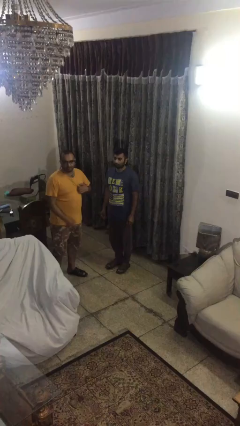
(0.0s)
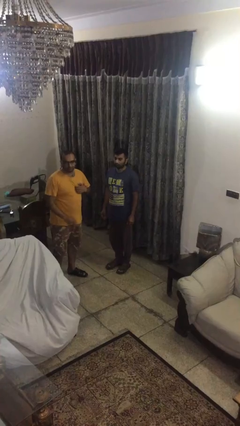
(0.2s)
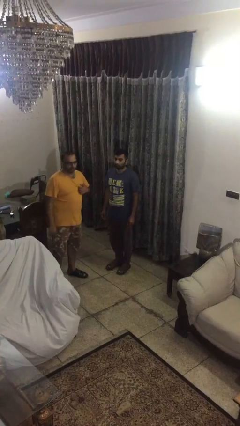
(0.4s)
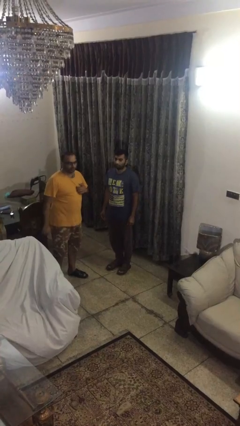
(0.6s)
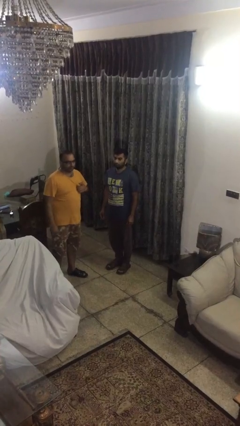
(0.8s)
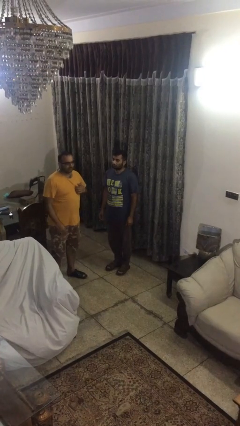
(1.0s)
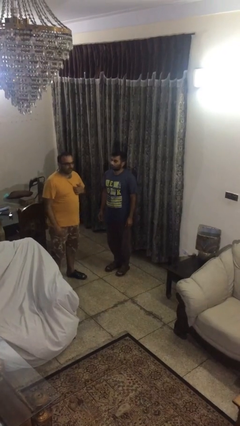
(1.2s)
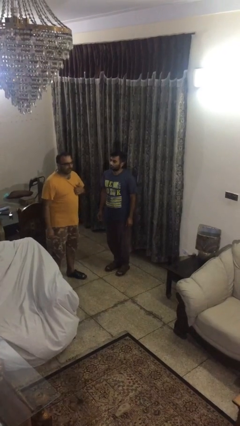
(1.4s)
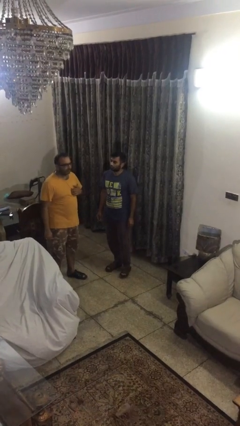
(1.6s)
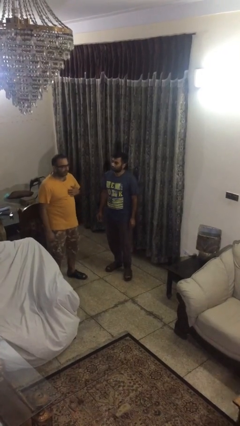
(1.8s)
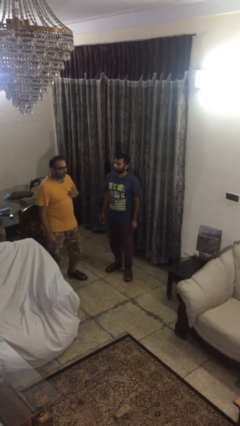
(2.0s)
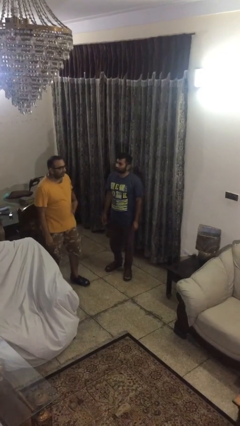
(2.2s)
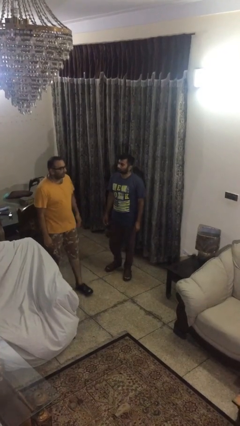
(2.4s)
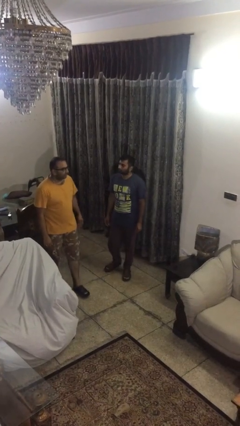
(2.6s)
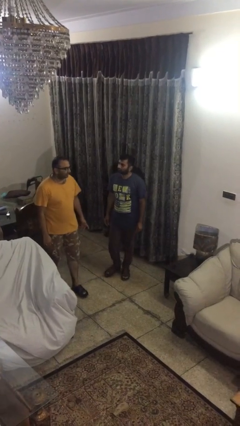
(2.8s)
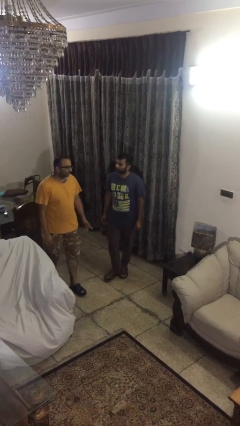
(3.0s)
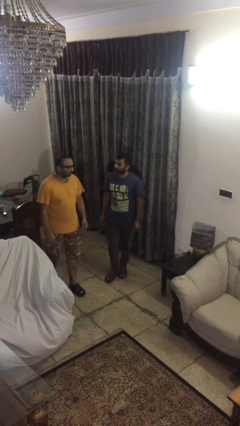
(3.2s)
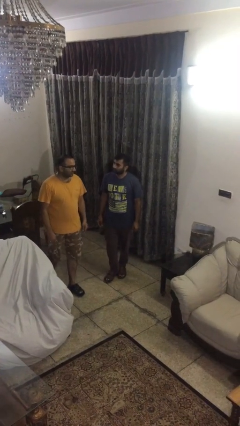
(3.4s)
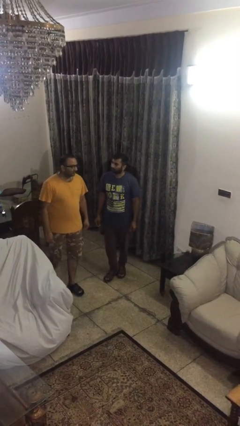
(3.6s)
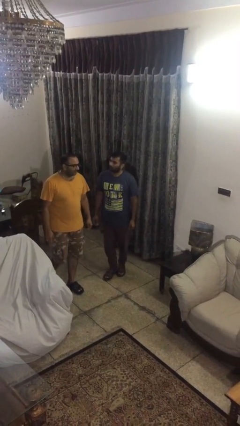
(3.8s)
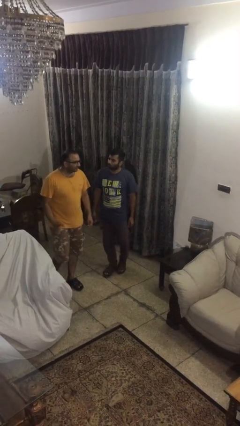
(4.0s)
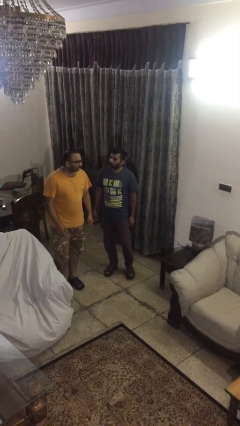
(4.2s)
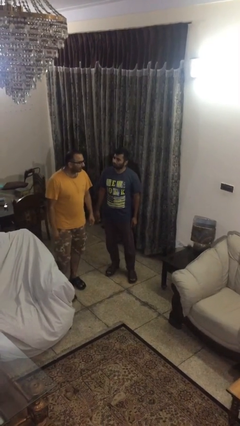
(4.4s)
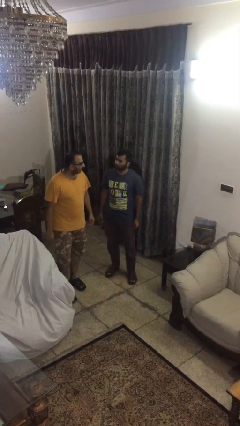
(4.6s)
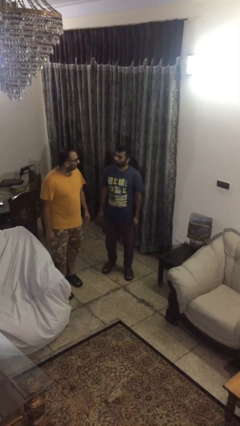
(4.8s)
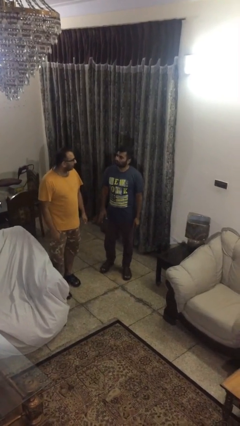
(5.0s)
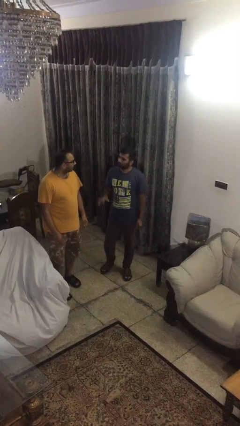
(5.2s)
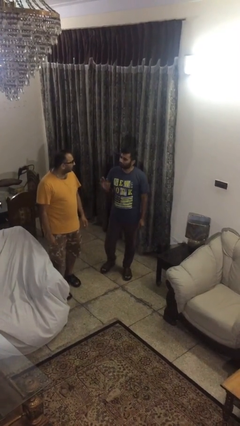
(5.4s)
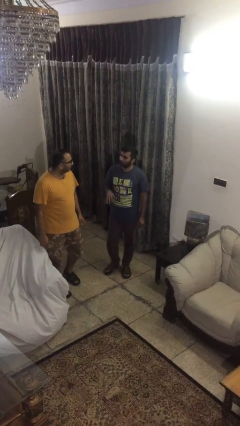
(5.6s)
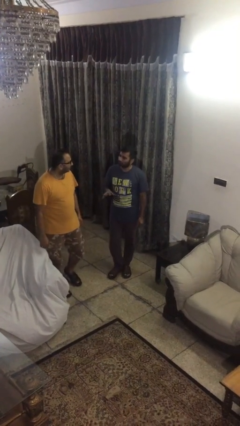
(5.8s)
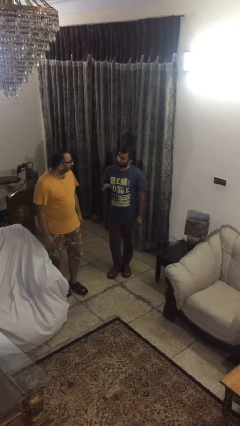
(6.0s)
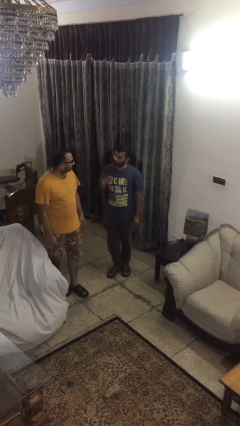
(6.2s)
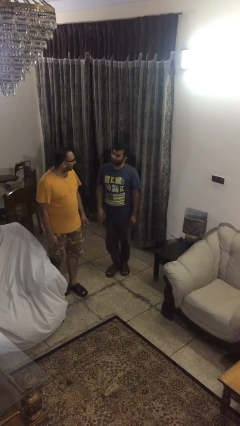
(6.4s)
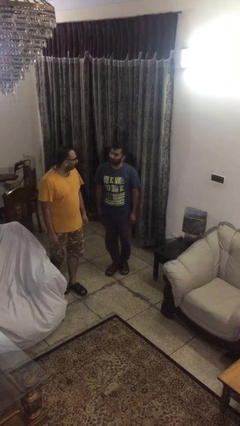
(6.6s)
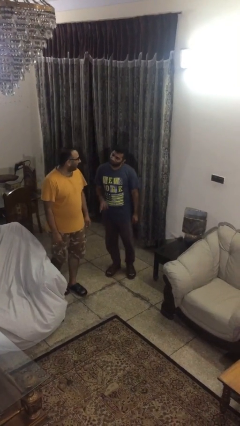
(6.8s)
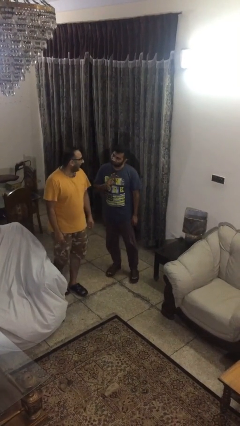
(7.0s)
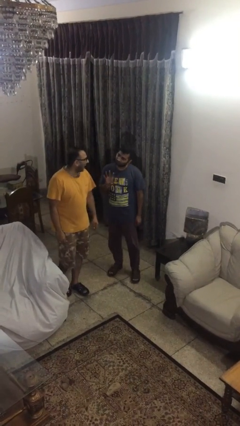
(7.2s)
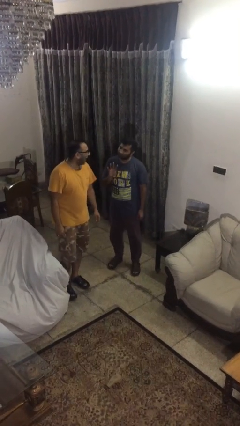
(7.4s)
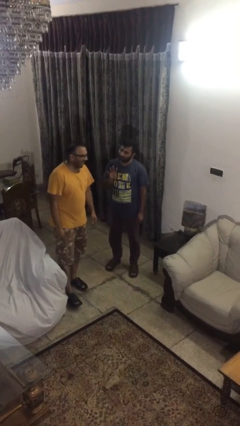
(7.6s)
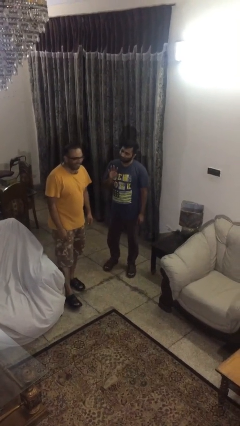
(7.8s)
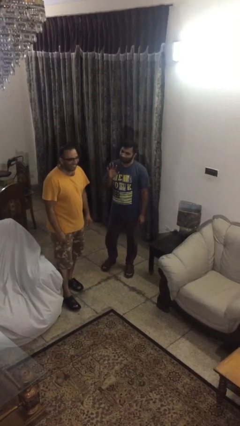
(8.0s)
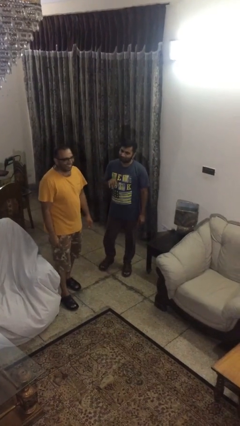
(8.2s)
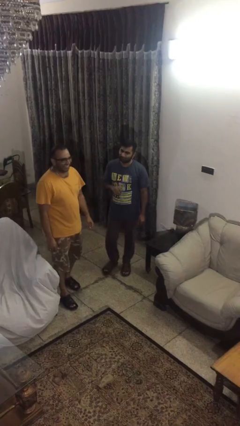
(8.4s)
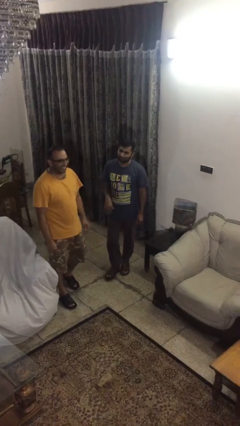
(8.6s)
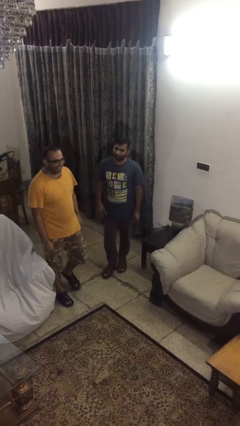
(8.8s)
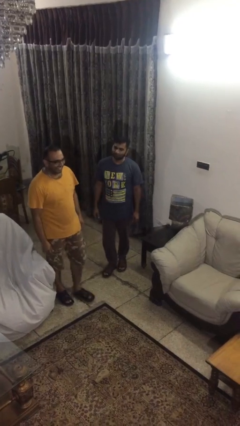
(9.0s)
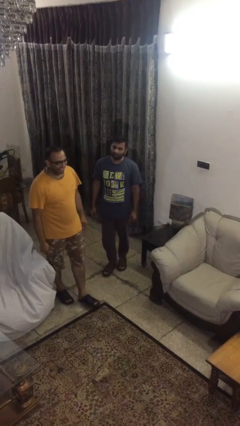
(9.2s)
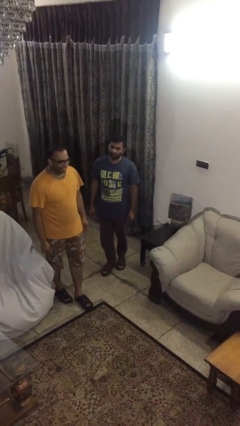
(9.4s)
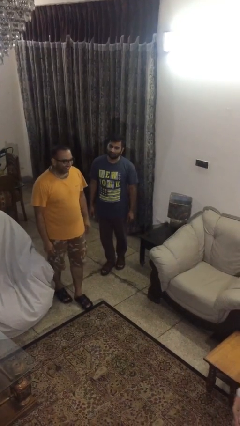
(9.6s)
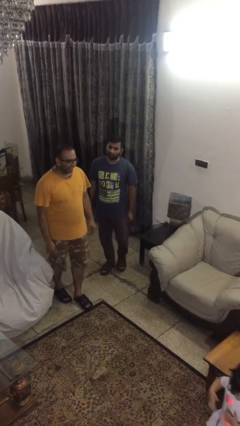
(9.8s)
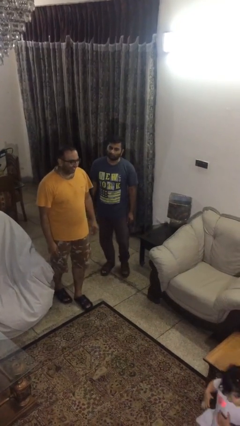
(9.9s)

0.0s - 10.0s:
person talks to person

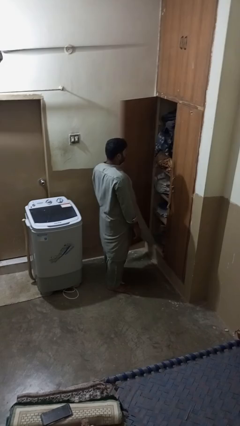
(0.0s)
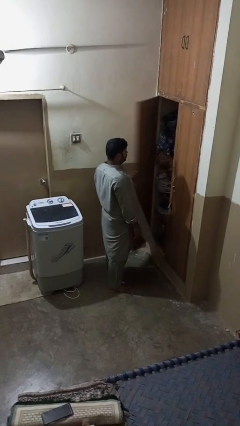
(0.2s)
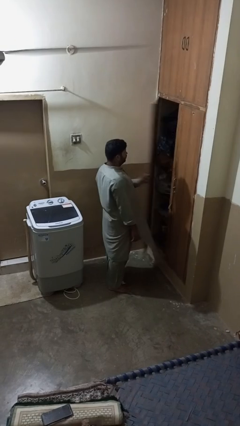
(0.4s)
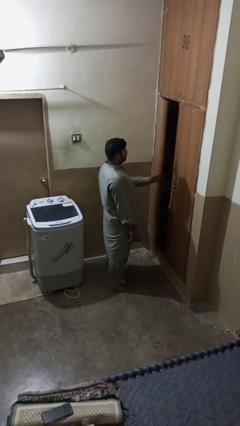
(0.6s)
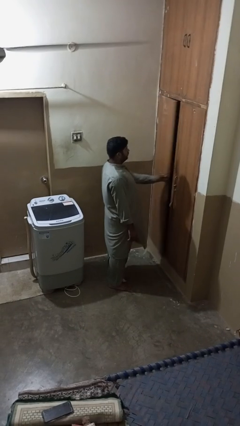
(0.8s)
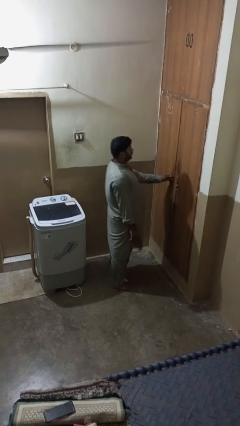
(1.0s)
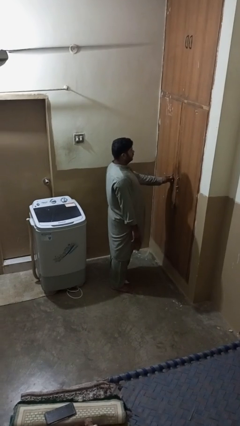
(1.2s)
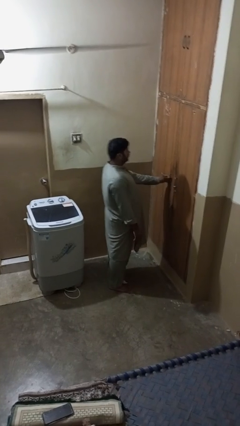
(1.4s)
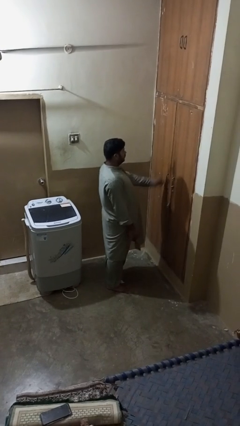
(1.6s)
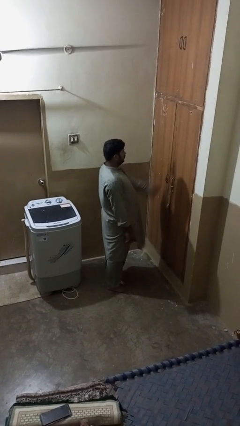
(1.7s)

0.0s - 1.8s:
person closes closet door

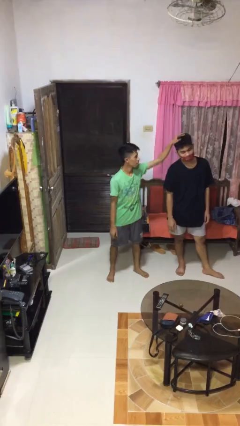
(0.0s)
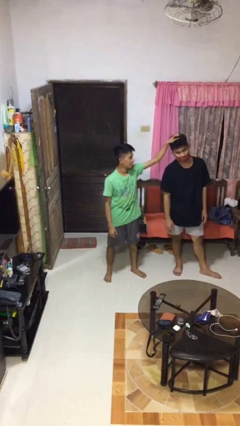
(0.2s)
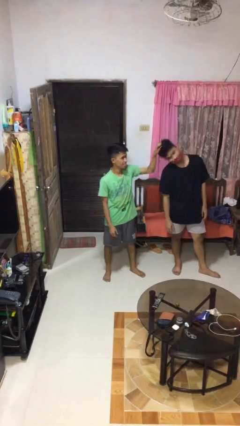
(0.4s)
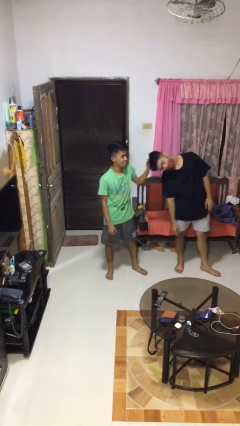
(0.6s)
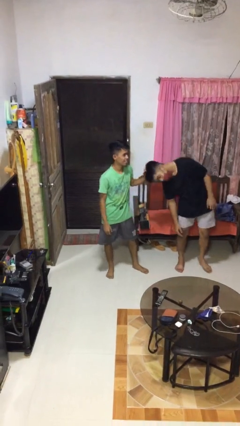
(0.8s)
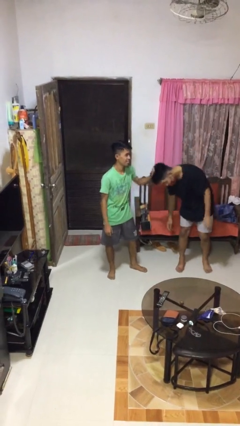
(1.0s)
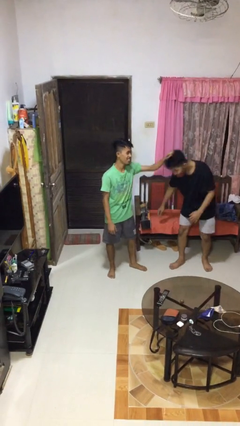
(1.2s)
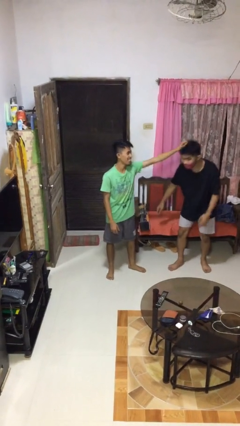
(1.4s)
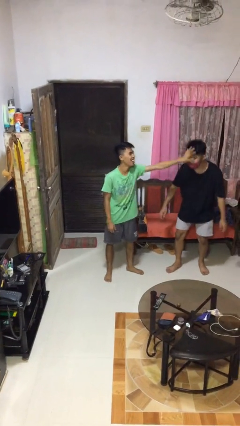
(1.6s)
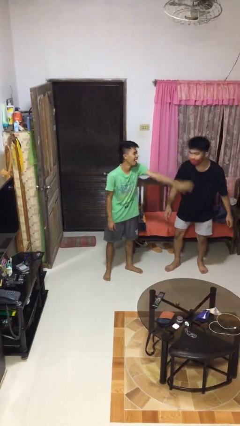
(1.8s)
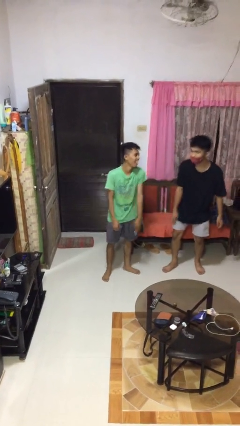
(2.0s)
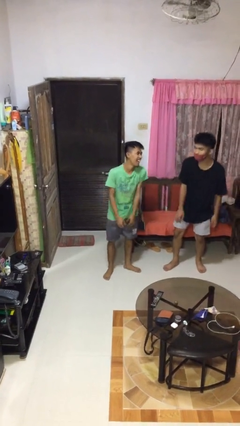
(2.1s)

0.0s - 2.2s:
person grabs person by hair

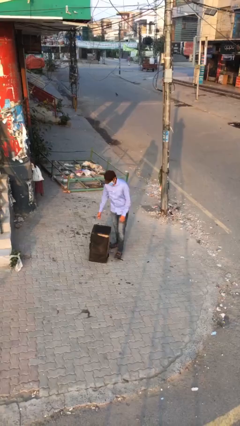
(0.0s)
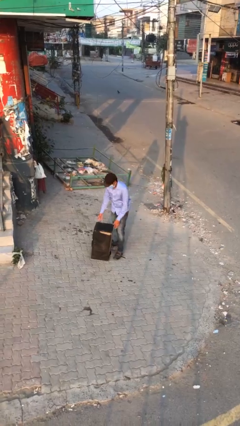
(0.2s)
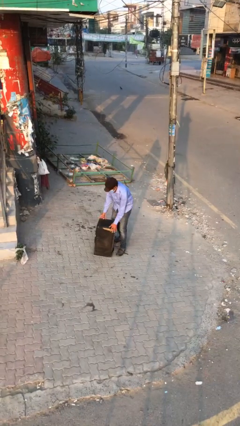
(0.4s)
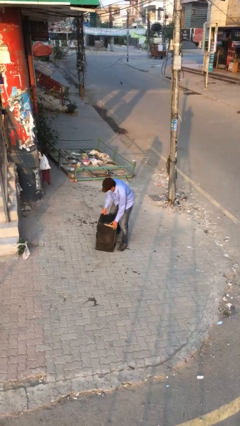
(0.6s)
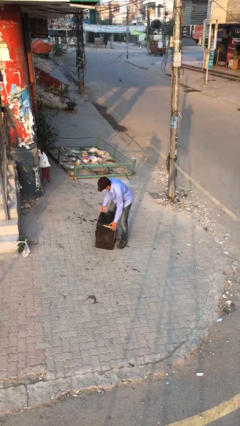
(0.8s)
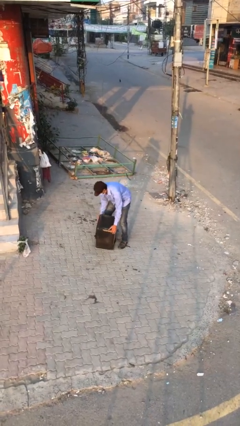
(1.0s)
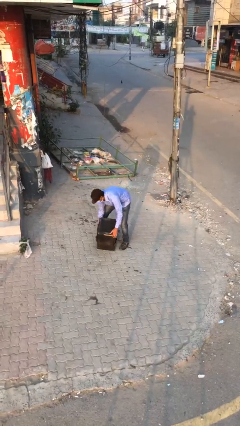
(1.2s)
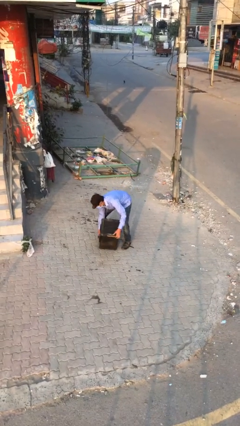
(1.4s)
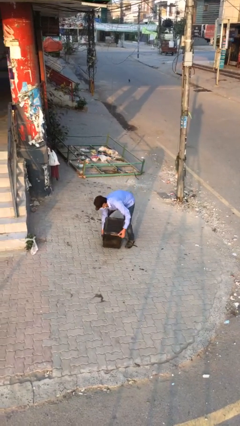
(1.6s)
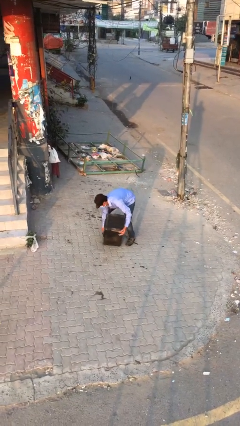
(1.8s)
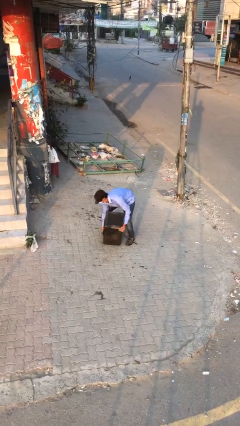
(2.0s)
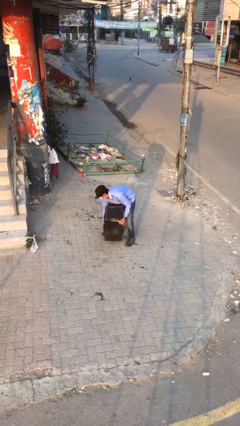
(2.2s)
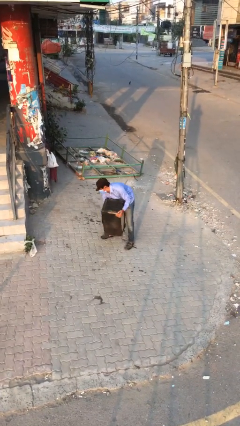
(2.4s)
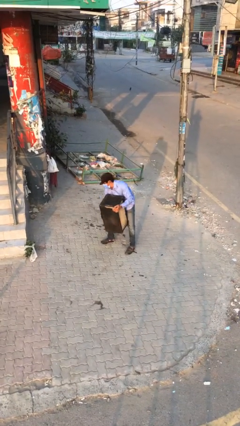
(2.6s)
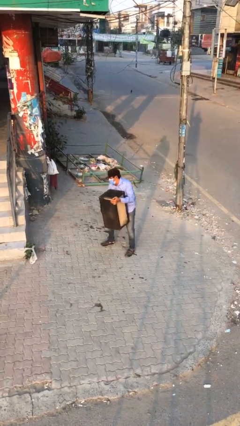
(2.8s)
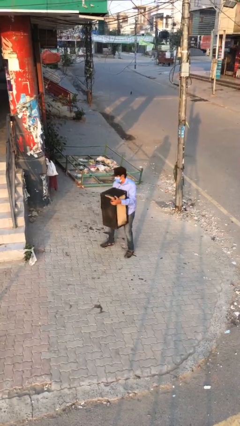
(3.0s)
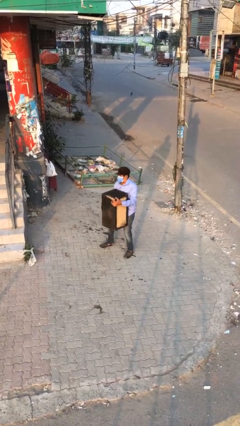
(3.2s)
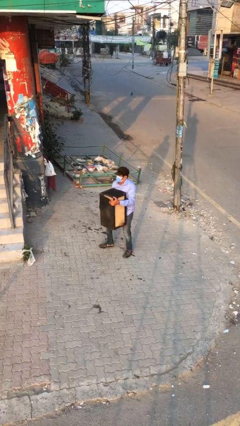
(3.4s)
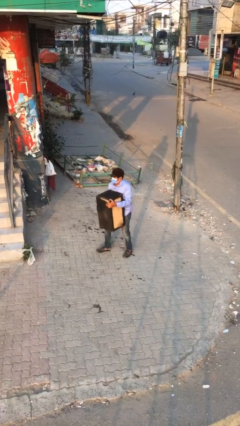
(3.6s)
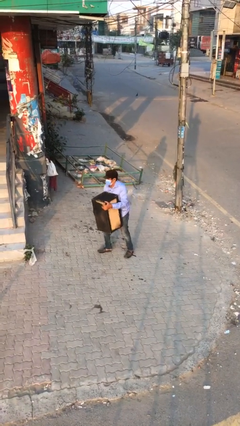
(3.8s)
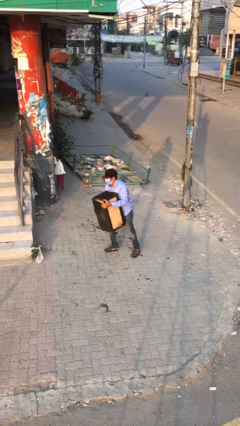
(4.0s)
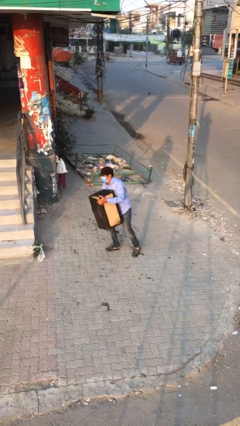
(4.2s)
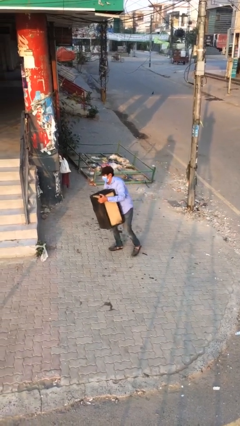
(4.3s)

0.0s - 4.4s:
person picks up object from floor
